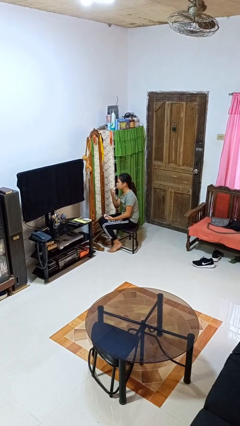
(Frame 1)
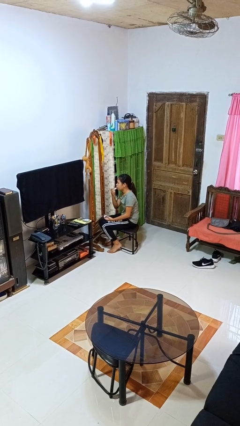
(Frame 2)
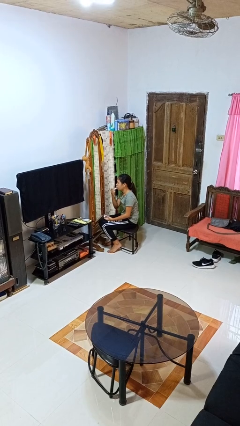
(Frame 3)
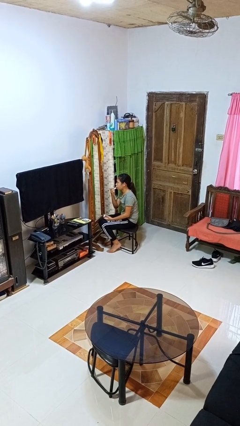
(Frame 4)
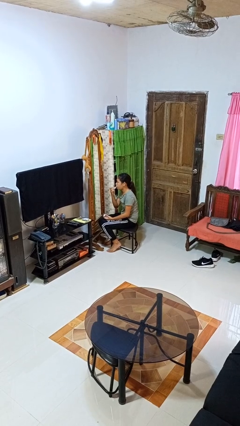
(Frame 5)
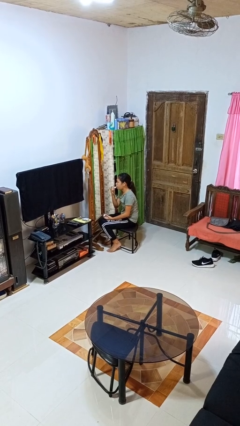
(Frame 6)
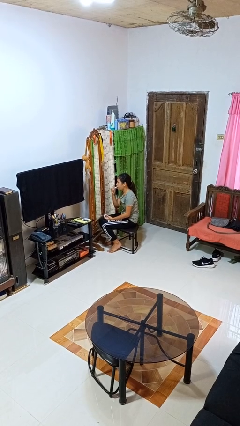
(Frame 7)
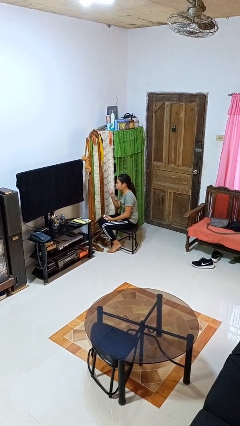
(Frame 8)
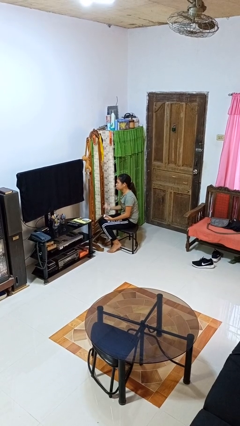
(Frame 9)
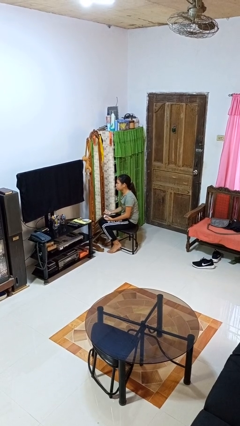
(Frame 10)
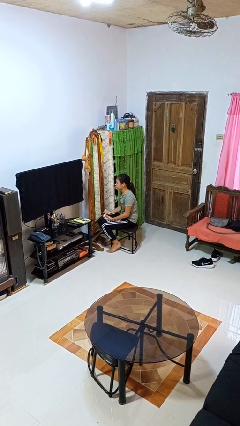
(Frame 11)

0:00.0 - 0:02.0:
person applies lip makeup

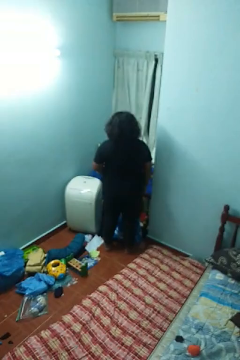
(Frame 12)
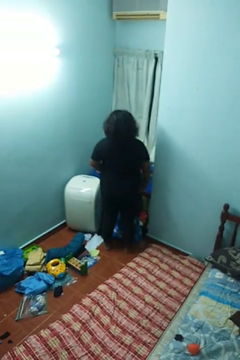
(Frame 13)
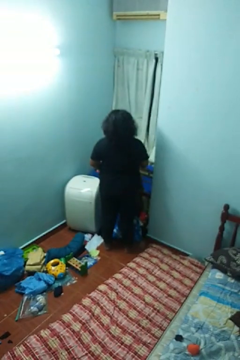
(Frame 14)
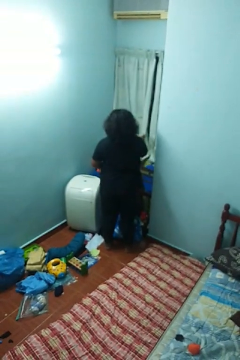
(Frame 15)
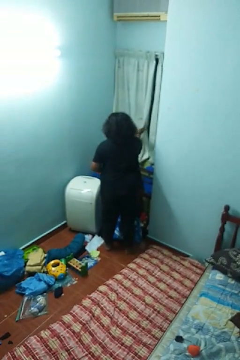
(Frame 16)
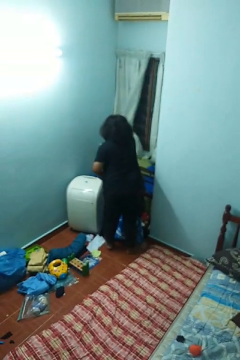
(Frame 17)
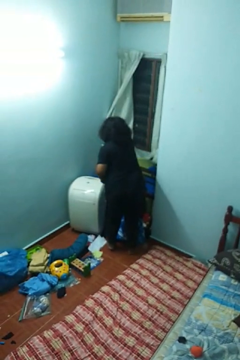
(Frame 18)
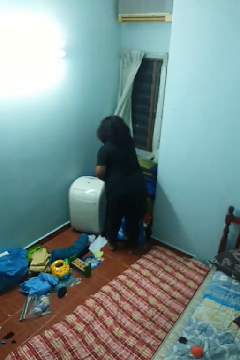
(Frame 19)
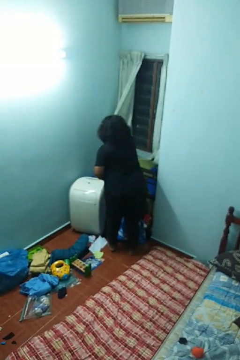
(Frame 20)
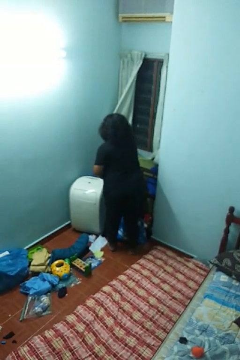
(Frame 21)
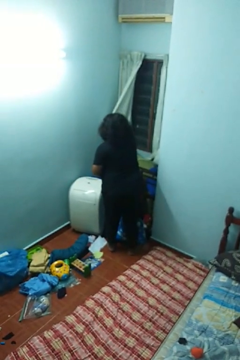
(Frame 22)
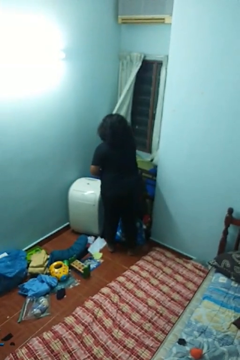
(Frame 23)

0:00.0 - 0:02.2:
person opens curtains

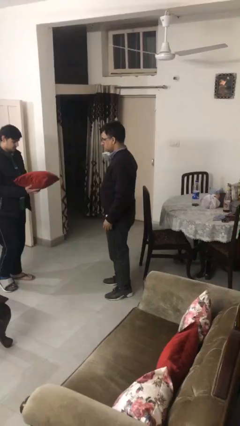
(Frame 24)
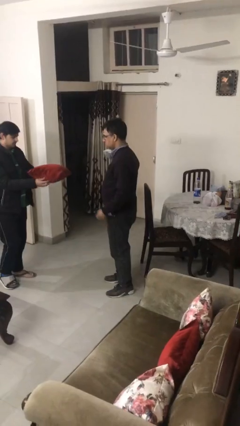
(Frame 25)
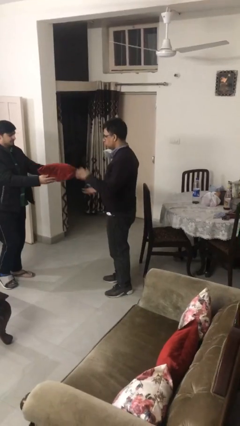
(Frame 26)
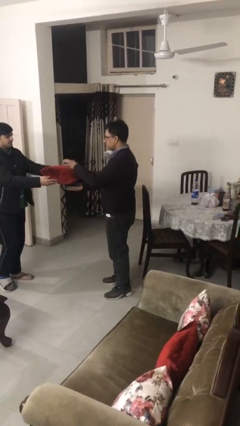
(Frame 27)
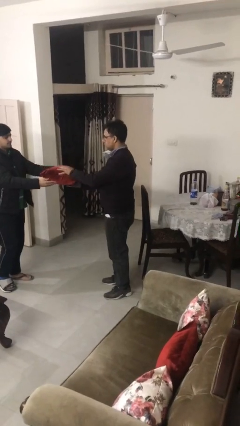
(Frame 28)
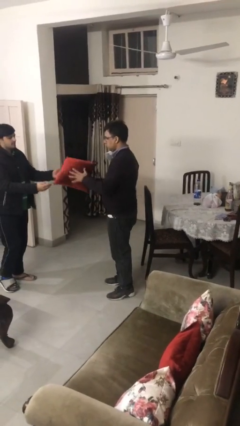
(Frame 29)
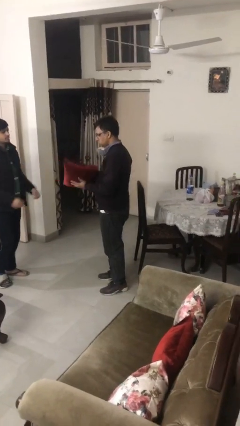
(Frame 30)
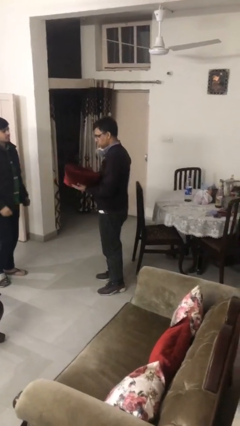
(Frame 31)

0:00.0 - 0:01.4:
person transfers object to person

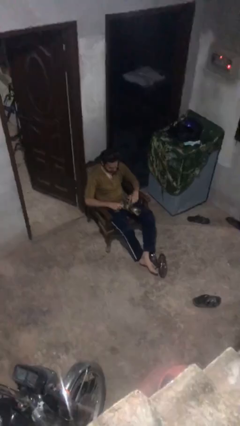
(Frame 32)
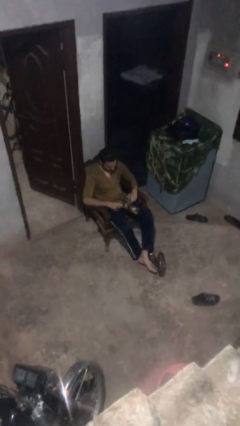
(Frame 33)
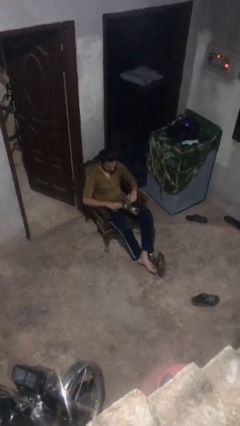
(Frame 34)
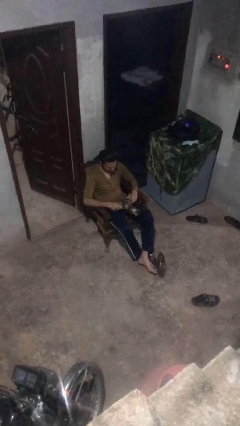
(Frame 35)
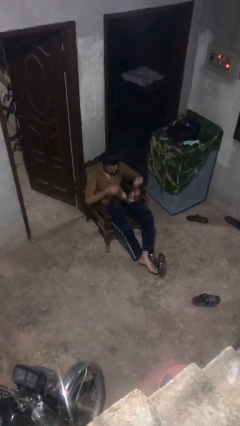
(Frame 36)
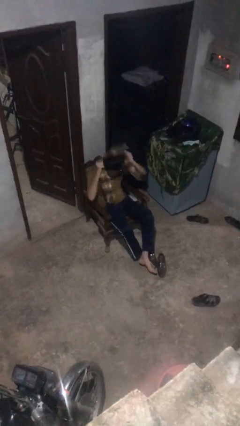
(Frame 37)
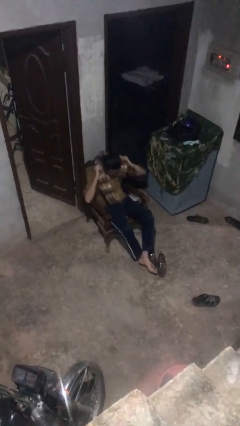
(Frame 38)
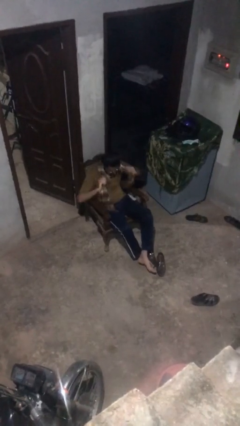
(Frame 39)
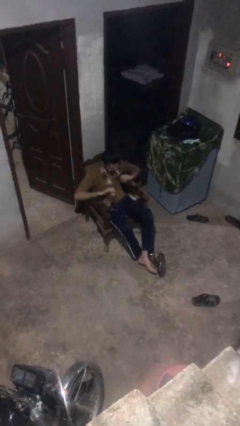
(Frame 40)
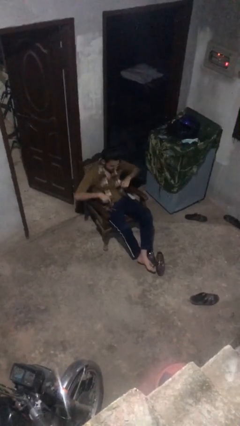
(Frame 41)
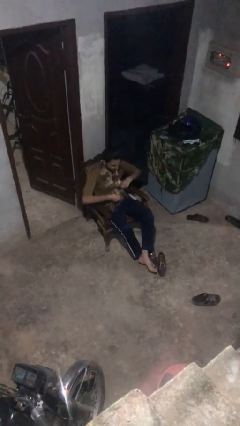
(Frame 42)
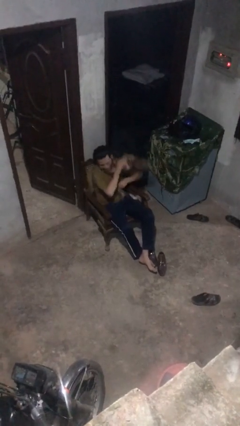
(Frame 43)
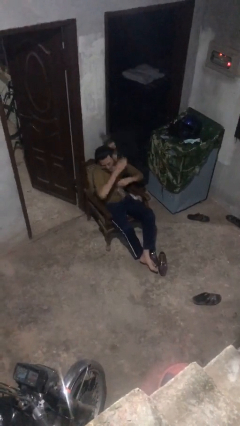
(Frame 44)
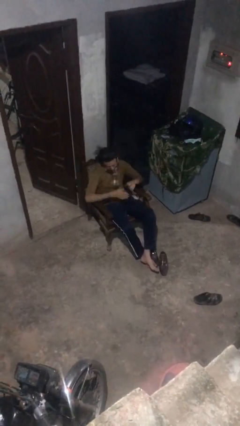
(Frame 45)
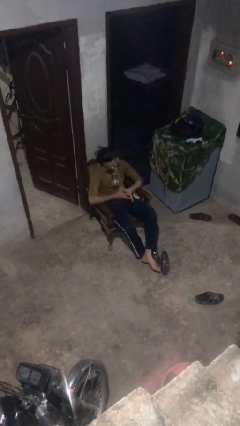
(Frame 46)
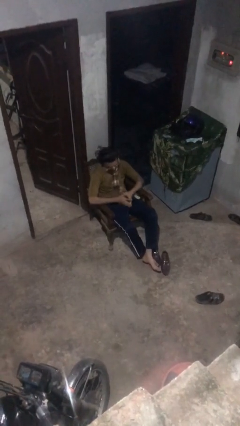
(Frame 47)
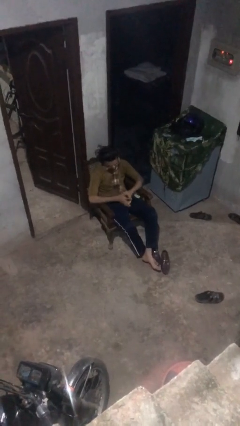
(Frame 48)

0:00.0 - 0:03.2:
person puts on scarf

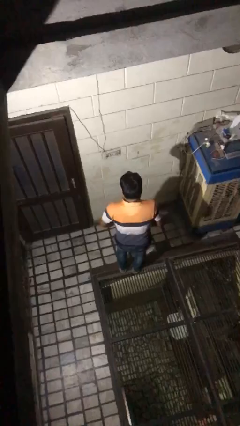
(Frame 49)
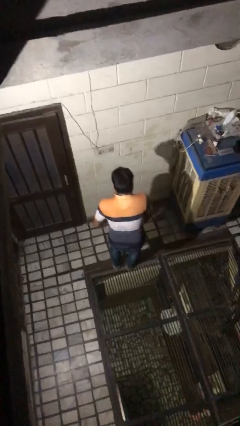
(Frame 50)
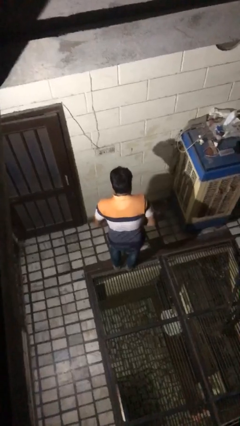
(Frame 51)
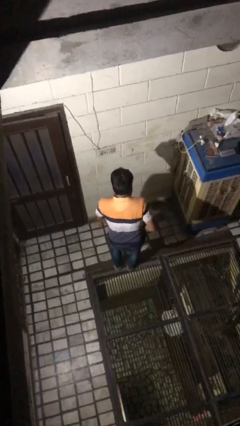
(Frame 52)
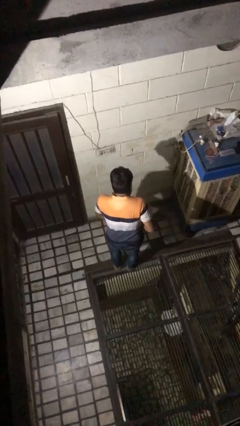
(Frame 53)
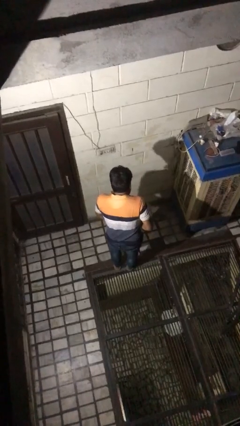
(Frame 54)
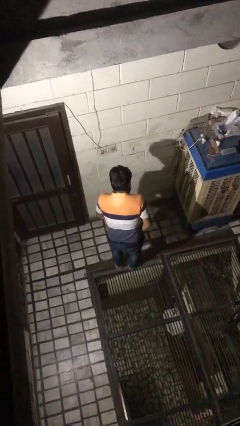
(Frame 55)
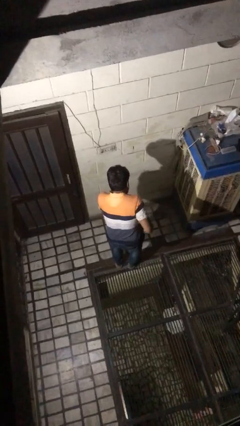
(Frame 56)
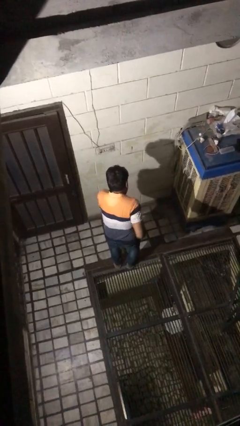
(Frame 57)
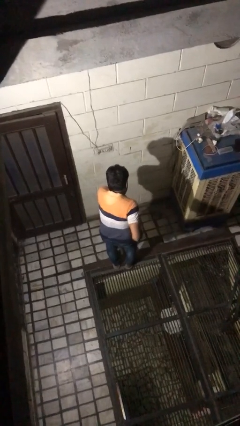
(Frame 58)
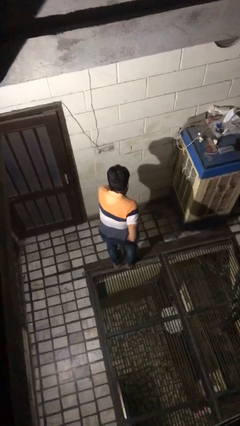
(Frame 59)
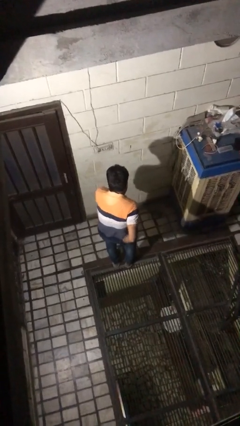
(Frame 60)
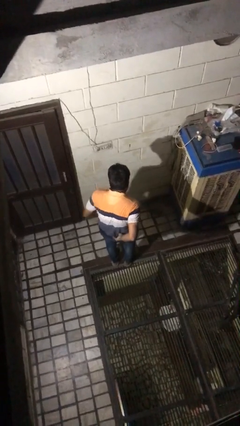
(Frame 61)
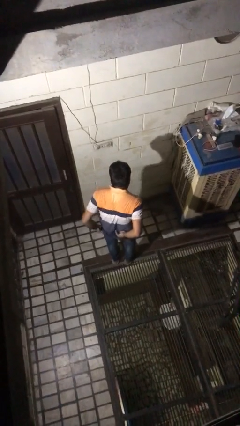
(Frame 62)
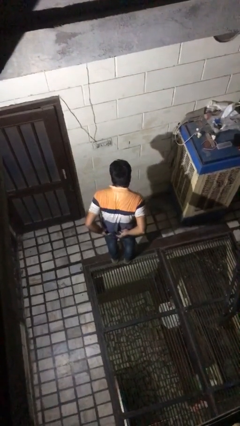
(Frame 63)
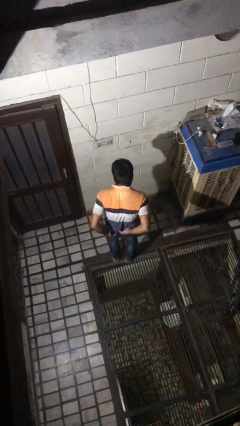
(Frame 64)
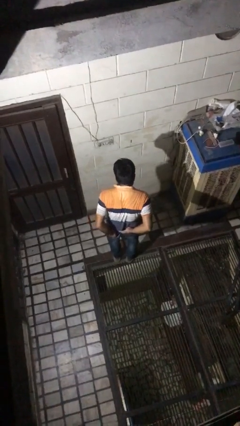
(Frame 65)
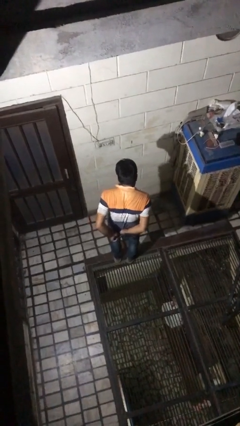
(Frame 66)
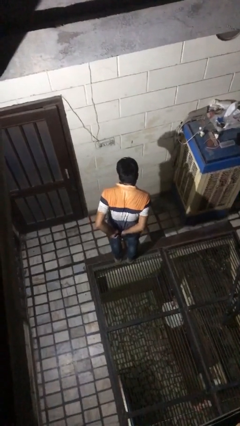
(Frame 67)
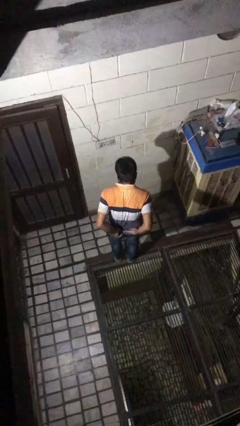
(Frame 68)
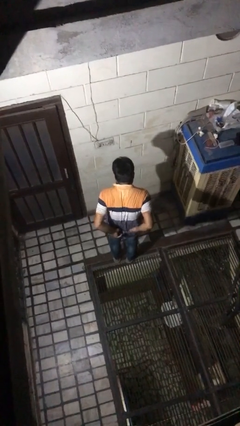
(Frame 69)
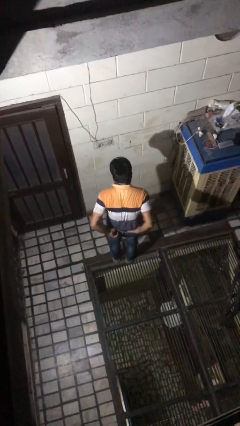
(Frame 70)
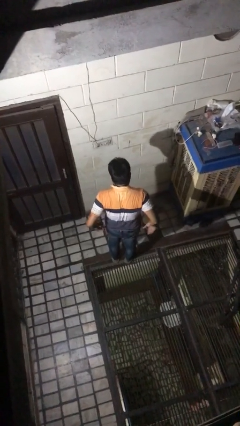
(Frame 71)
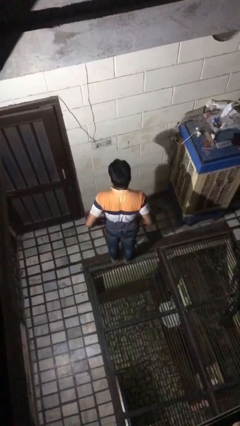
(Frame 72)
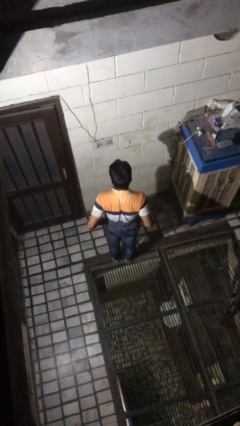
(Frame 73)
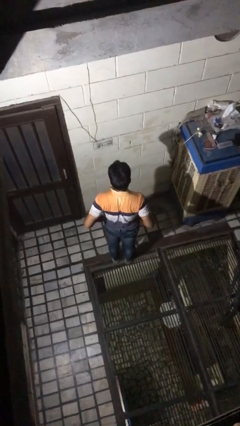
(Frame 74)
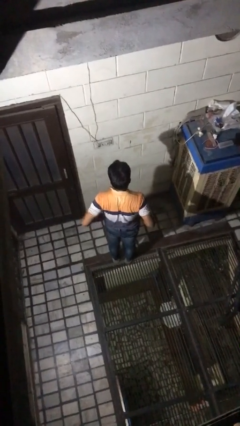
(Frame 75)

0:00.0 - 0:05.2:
person tucks in shirt

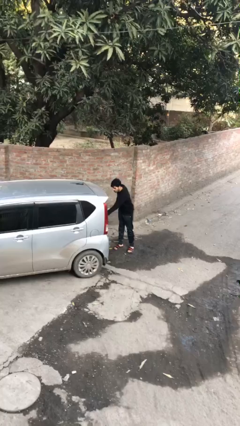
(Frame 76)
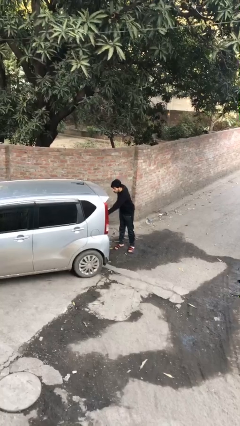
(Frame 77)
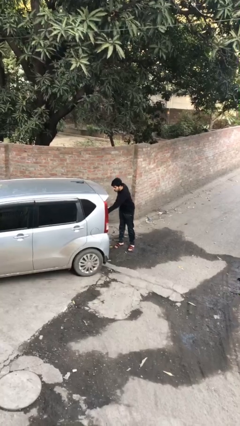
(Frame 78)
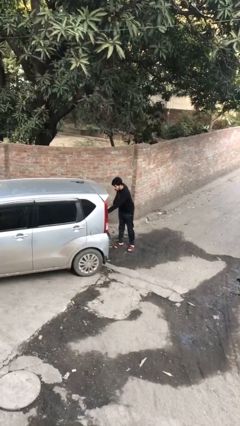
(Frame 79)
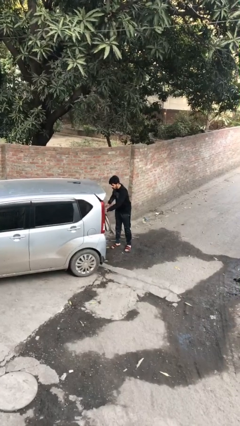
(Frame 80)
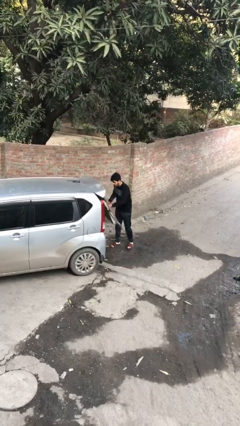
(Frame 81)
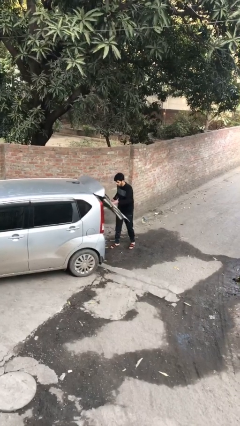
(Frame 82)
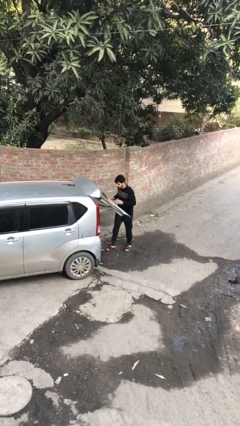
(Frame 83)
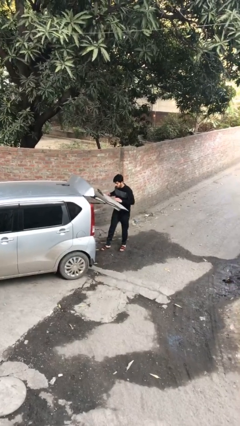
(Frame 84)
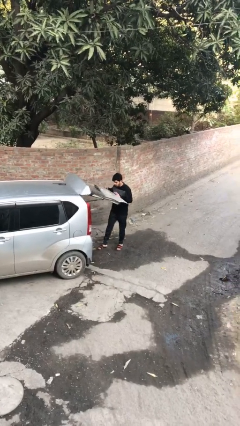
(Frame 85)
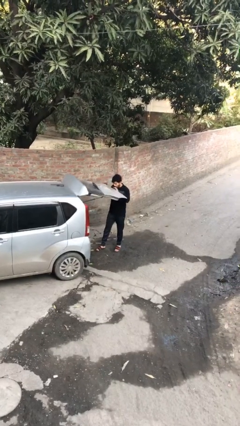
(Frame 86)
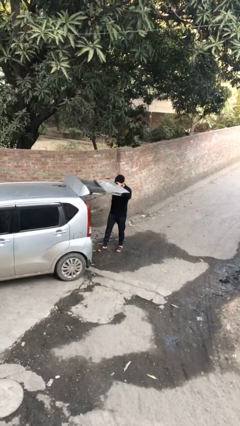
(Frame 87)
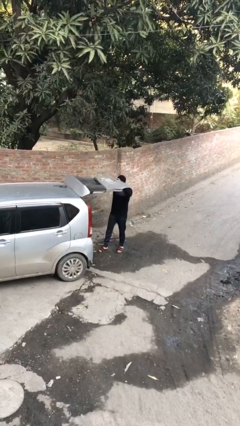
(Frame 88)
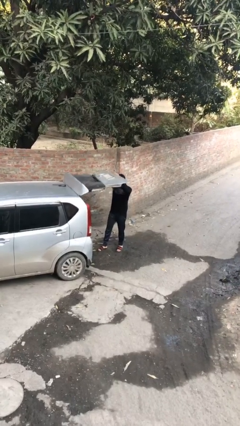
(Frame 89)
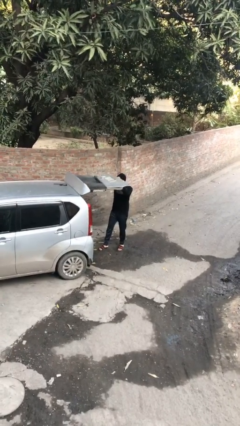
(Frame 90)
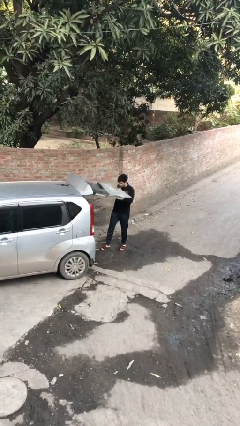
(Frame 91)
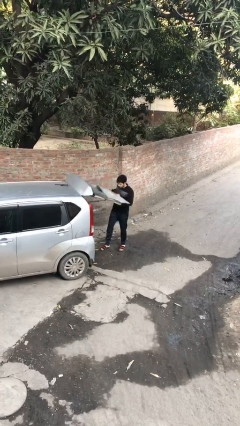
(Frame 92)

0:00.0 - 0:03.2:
person opens car trunk

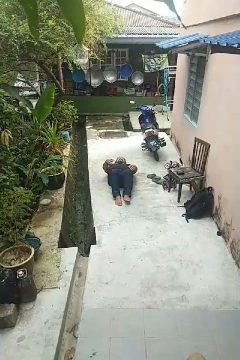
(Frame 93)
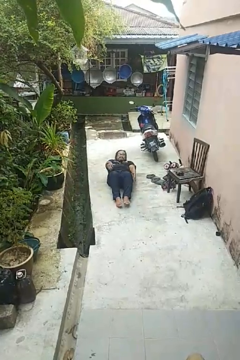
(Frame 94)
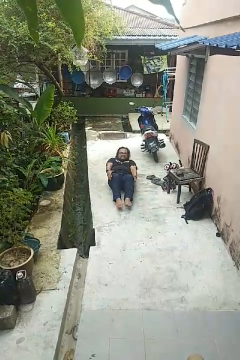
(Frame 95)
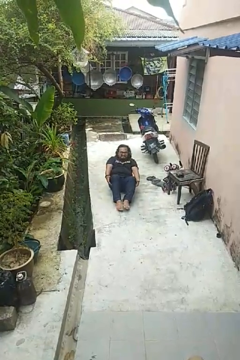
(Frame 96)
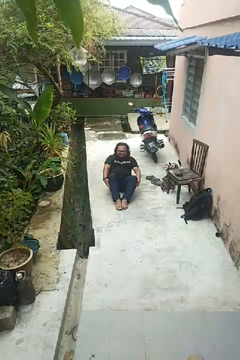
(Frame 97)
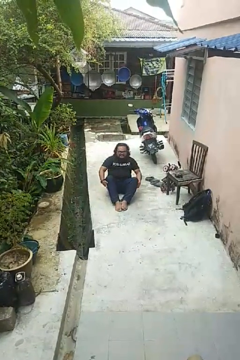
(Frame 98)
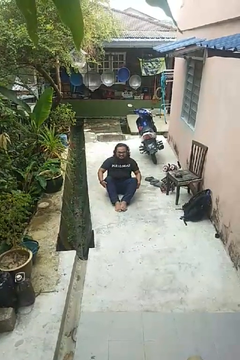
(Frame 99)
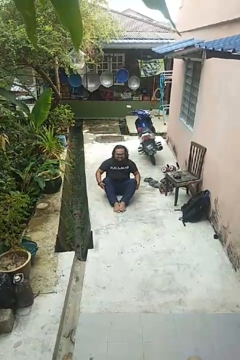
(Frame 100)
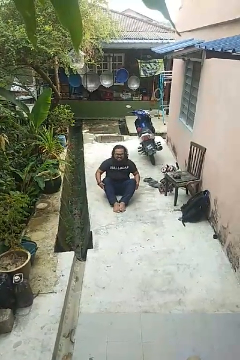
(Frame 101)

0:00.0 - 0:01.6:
person exercises with situp
